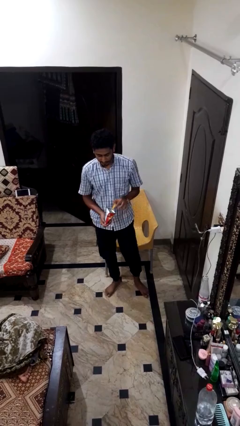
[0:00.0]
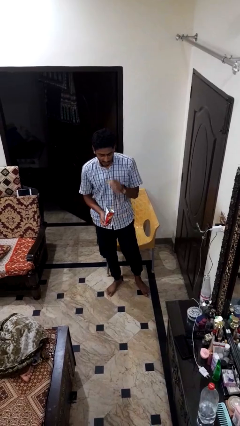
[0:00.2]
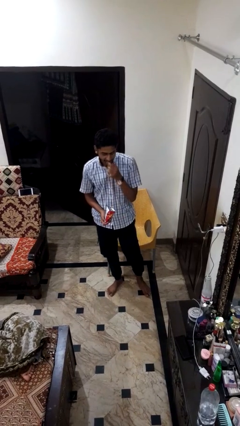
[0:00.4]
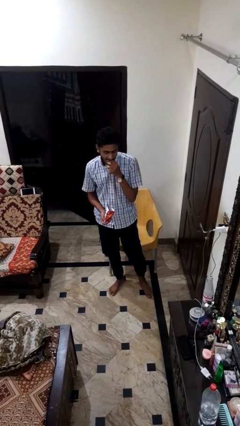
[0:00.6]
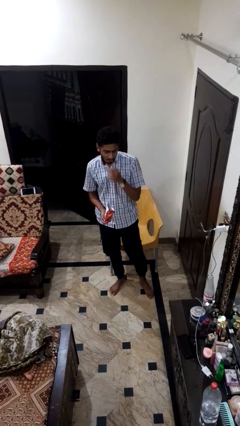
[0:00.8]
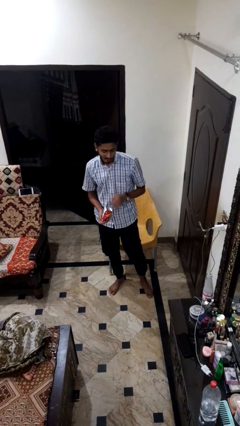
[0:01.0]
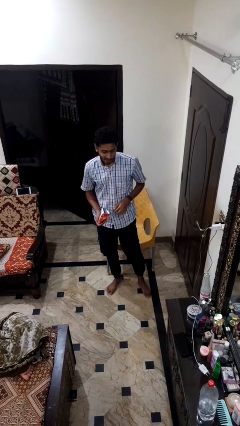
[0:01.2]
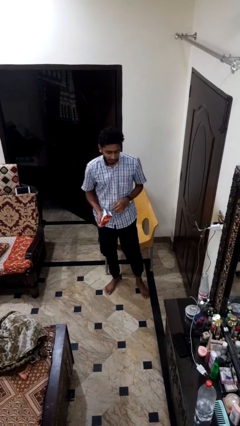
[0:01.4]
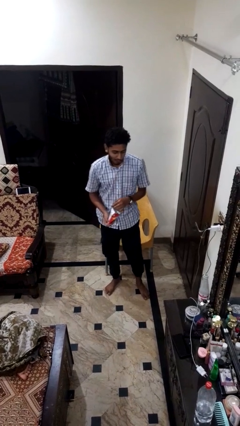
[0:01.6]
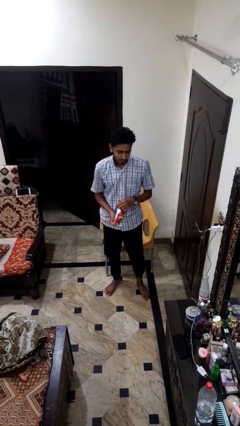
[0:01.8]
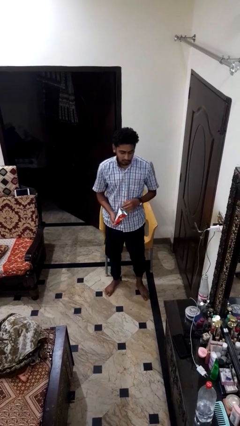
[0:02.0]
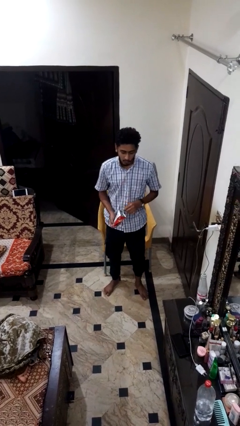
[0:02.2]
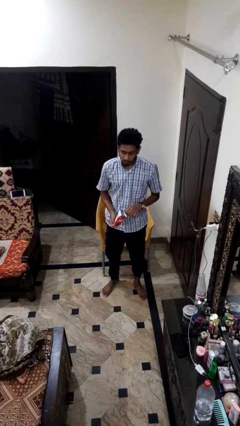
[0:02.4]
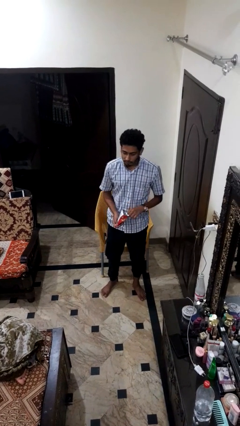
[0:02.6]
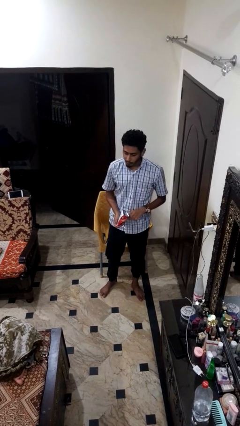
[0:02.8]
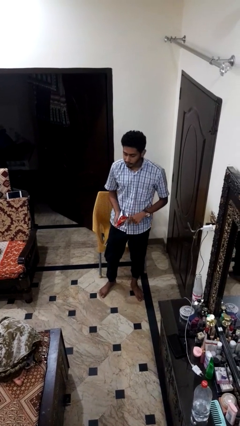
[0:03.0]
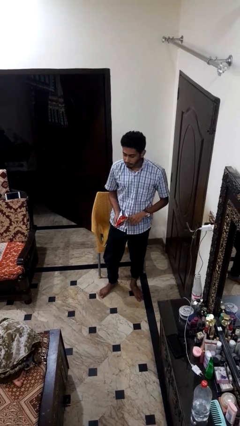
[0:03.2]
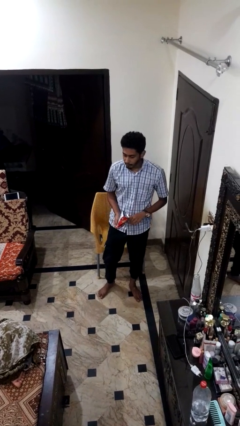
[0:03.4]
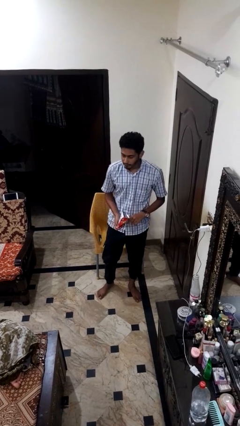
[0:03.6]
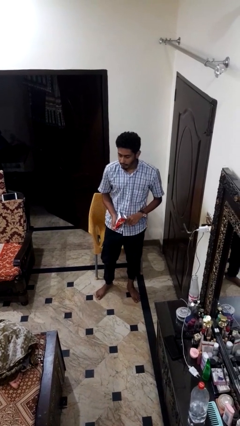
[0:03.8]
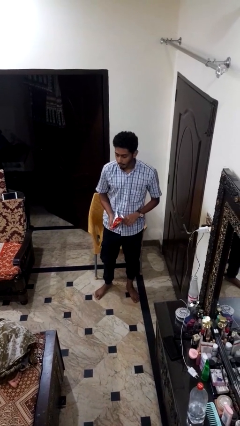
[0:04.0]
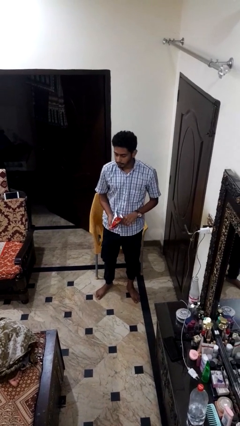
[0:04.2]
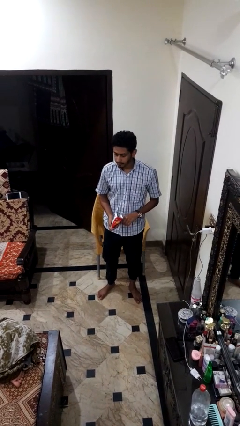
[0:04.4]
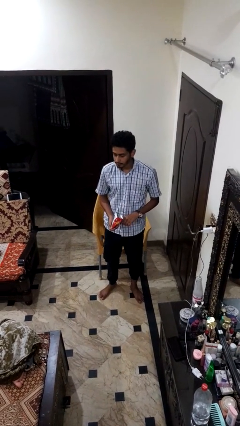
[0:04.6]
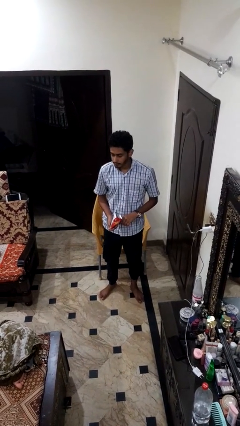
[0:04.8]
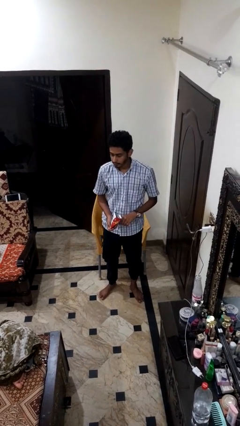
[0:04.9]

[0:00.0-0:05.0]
person eats snack from bag

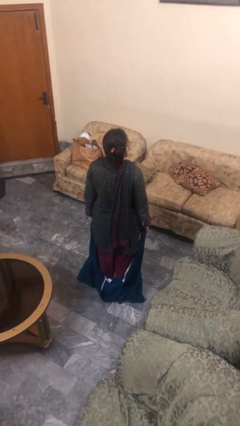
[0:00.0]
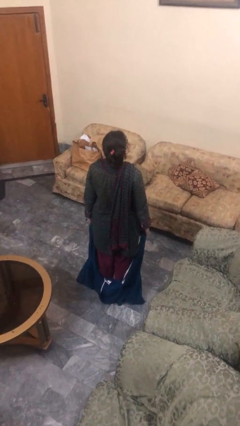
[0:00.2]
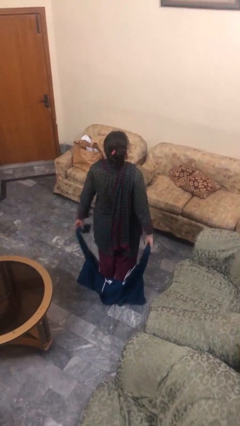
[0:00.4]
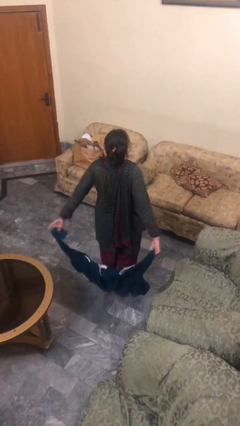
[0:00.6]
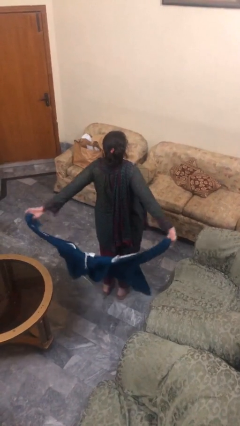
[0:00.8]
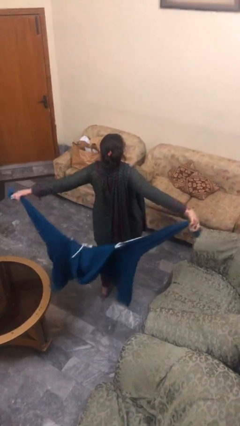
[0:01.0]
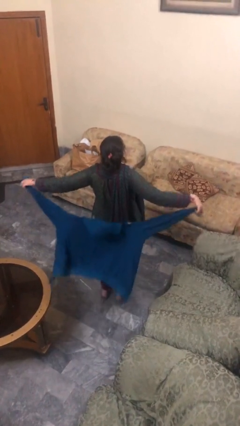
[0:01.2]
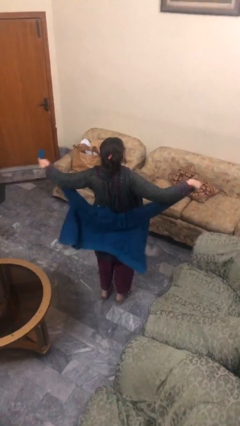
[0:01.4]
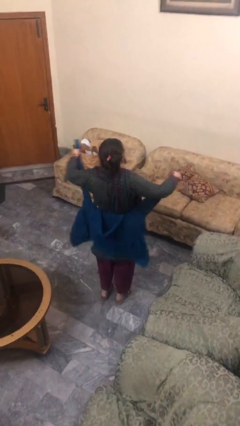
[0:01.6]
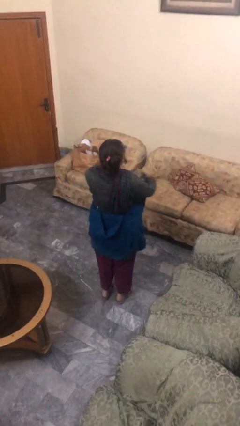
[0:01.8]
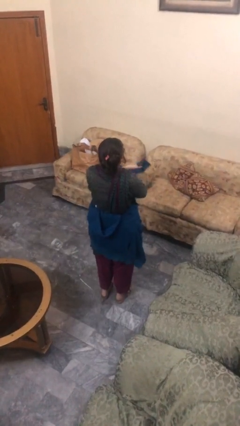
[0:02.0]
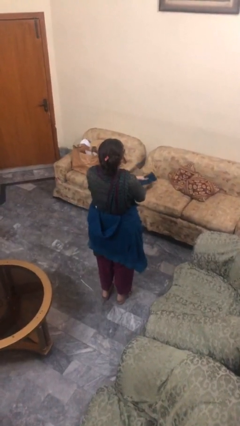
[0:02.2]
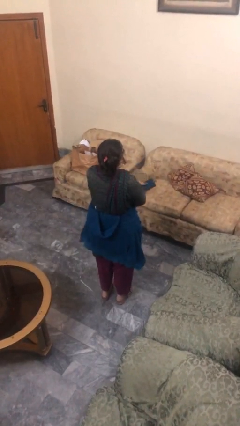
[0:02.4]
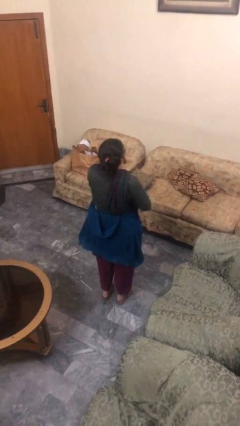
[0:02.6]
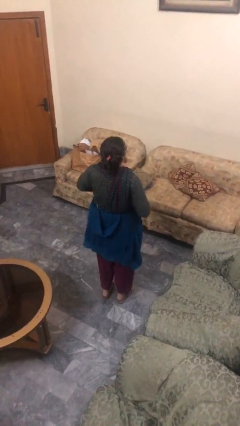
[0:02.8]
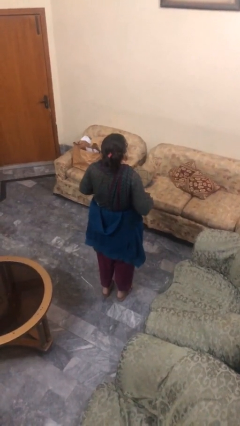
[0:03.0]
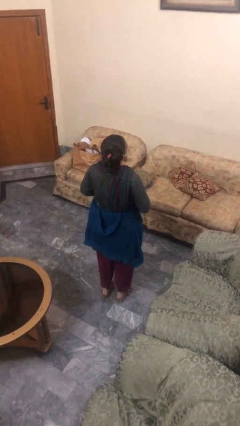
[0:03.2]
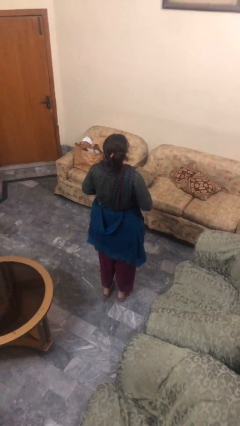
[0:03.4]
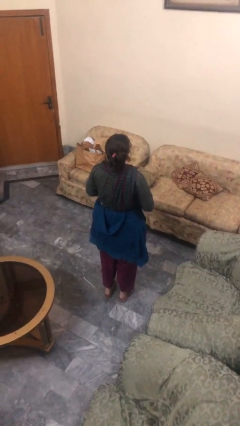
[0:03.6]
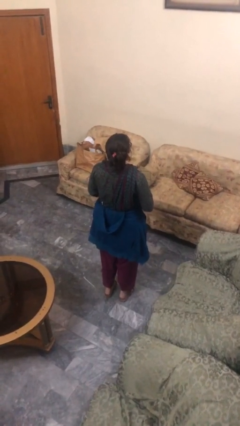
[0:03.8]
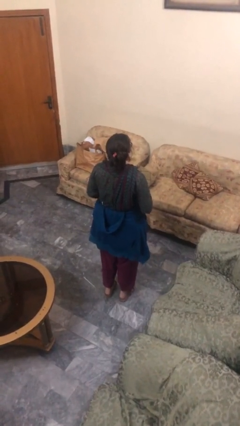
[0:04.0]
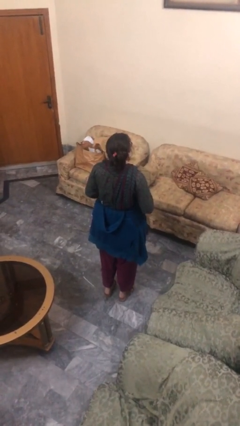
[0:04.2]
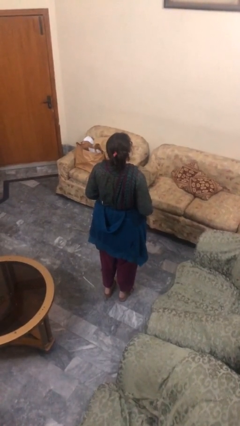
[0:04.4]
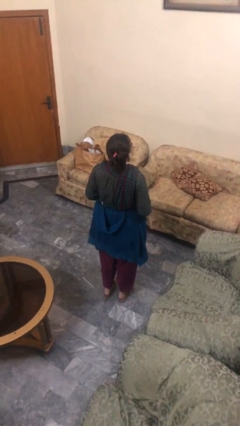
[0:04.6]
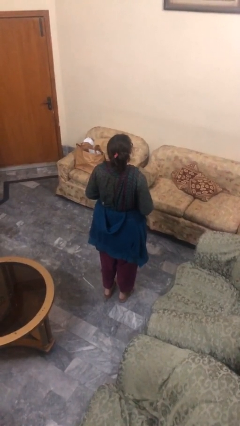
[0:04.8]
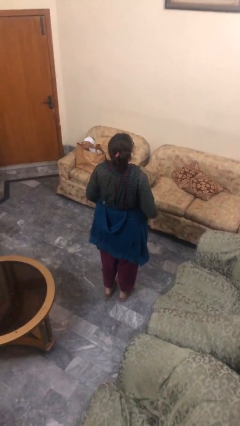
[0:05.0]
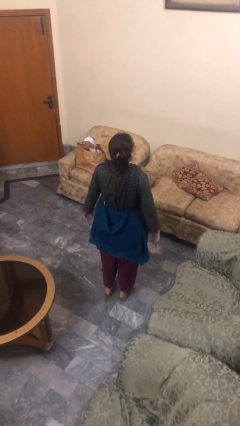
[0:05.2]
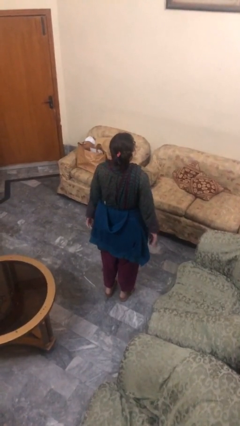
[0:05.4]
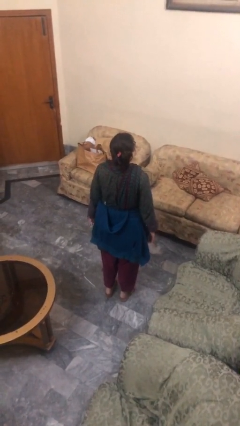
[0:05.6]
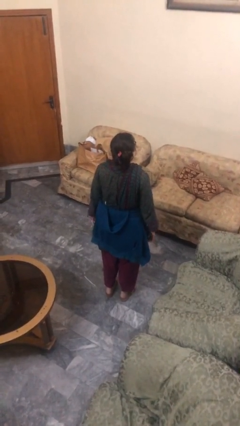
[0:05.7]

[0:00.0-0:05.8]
person ties jacket around waist

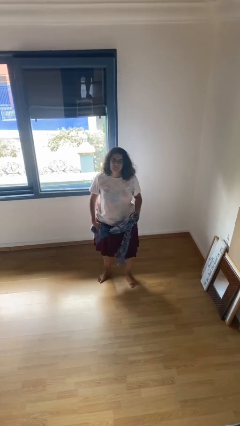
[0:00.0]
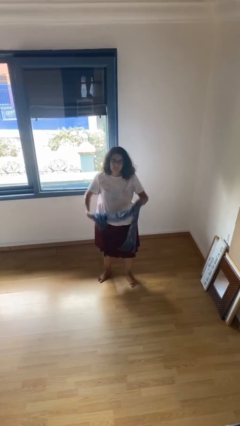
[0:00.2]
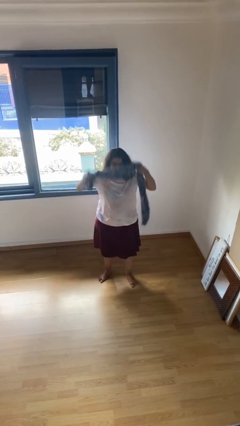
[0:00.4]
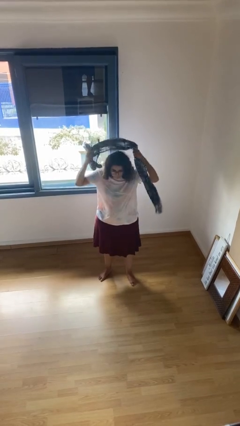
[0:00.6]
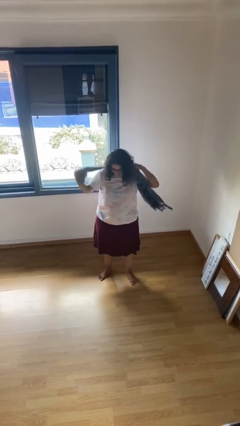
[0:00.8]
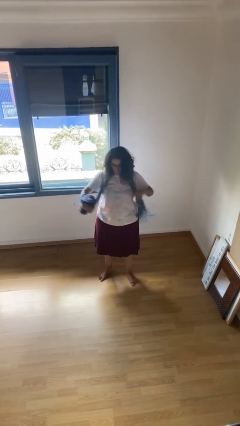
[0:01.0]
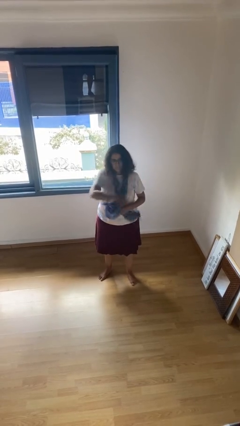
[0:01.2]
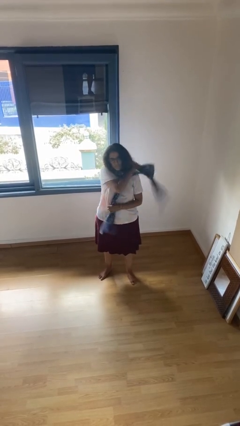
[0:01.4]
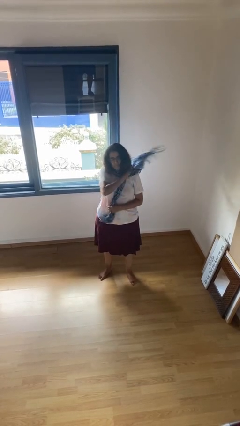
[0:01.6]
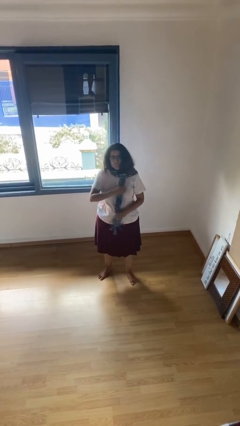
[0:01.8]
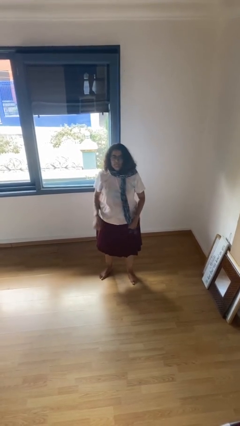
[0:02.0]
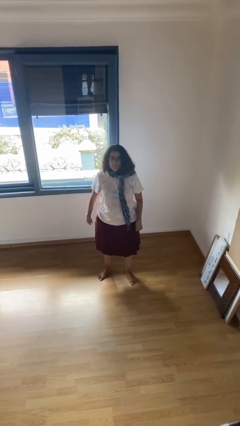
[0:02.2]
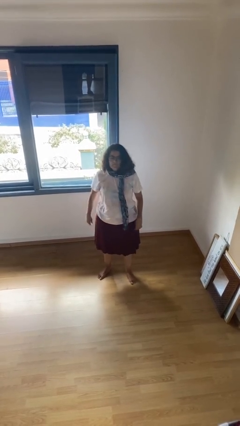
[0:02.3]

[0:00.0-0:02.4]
person puts on scarf

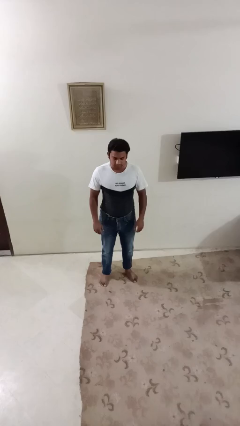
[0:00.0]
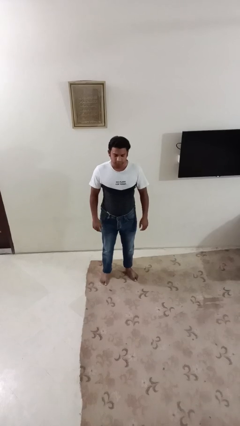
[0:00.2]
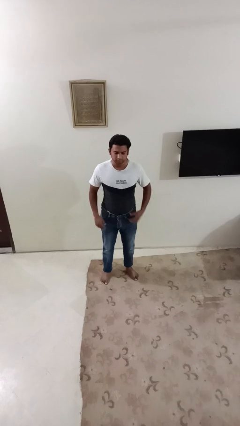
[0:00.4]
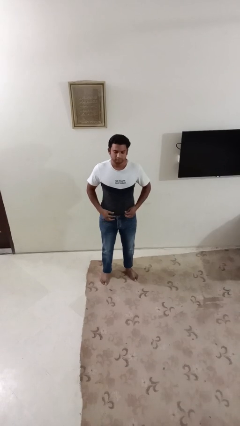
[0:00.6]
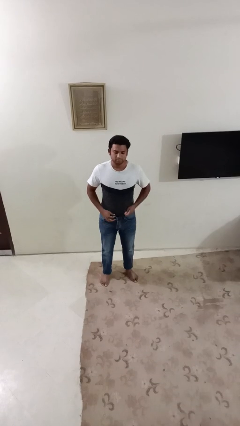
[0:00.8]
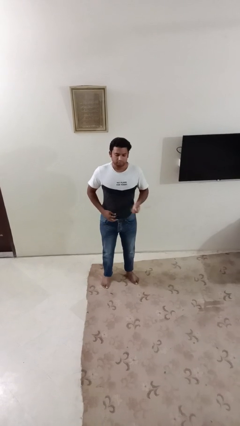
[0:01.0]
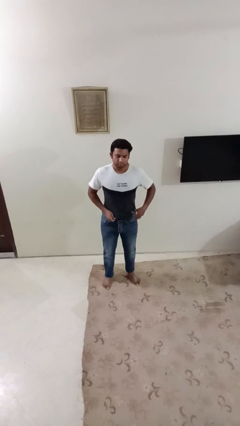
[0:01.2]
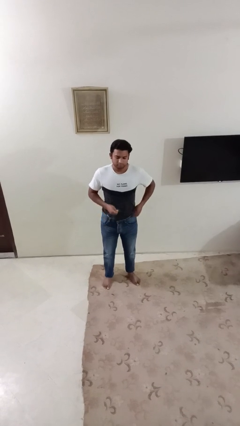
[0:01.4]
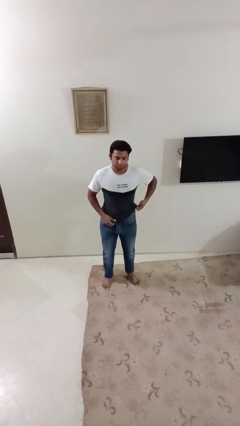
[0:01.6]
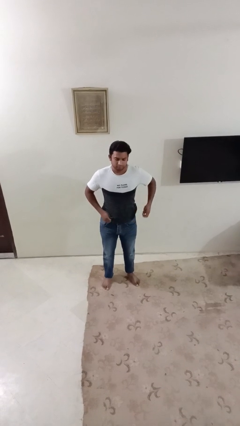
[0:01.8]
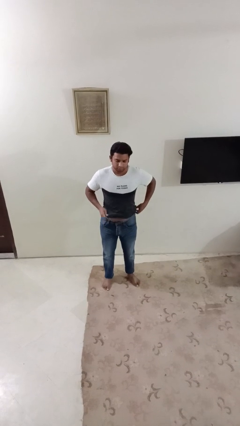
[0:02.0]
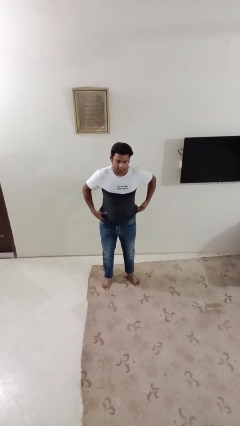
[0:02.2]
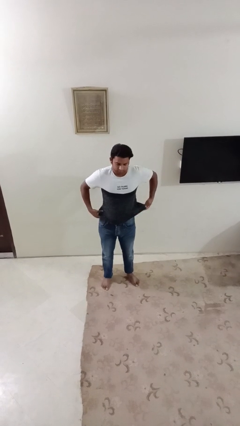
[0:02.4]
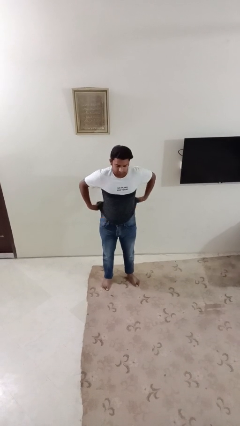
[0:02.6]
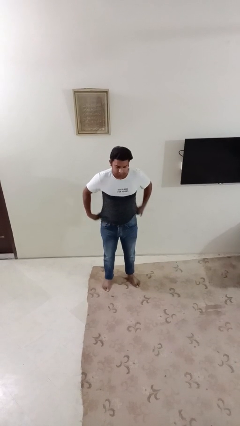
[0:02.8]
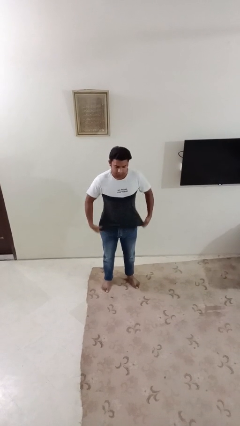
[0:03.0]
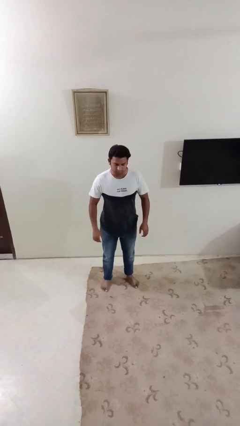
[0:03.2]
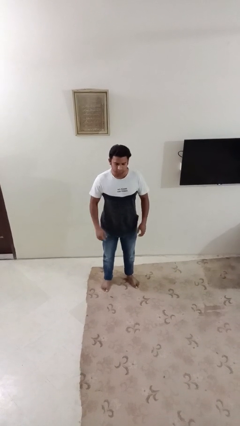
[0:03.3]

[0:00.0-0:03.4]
person untucks shirt

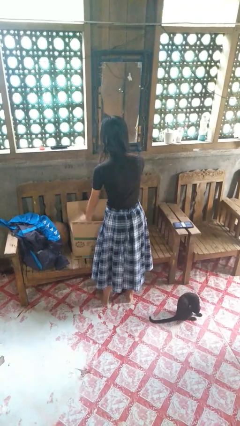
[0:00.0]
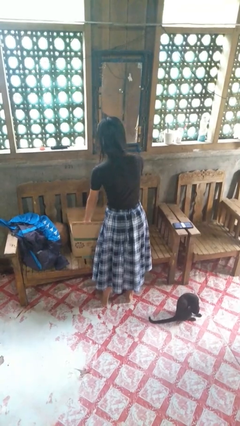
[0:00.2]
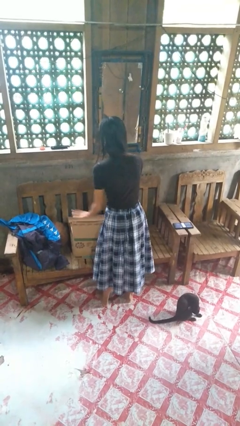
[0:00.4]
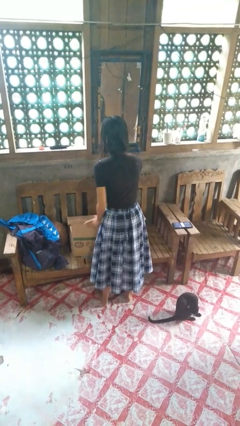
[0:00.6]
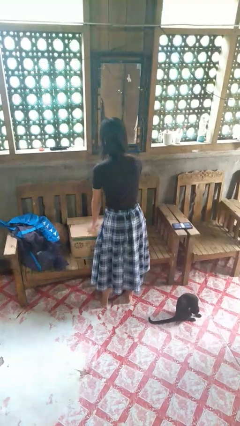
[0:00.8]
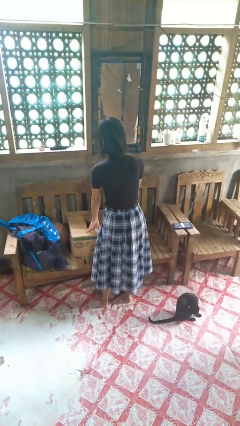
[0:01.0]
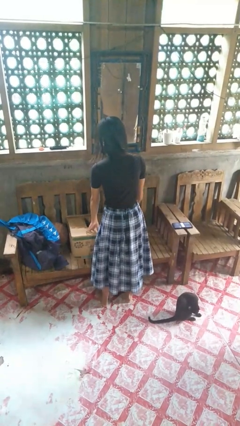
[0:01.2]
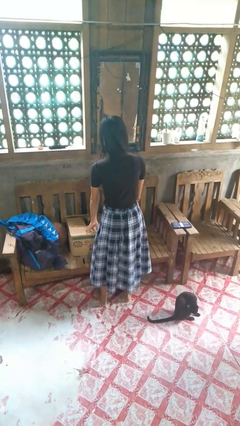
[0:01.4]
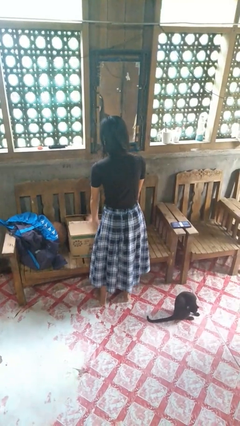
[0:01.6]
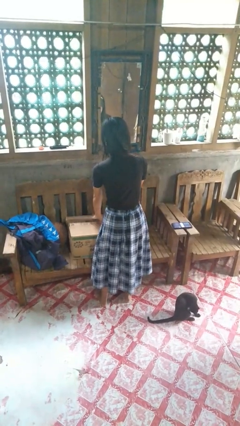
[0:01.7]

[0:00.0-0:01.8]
person closes box
